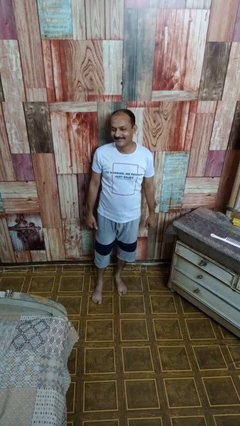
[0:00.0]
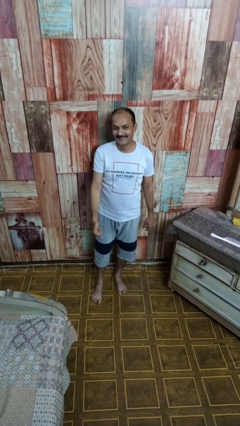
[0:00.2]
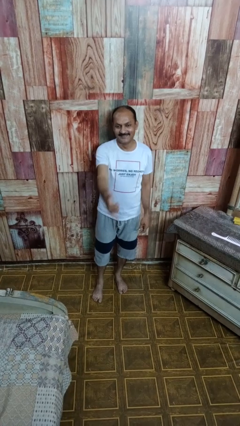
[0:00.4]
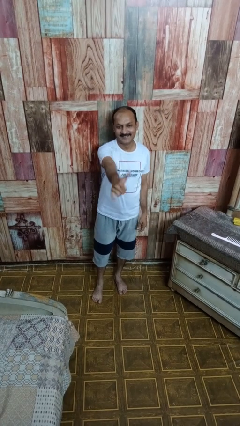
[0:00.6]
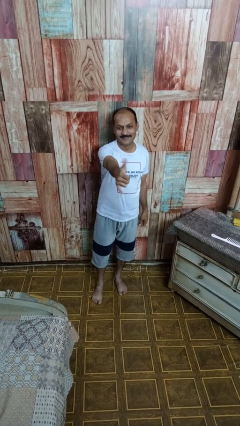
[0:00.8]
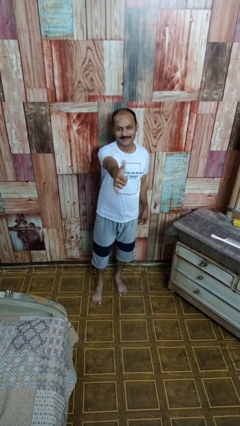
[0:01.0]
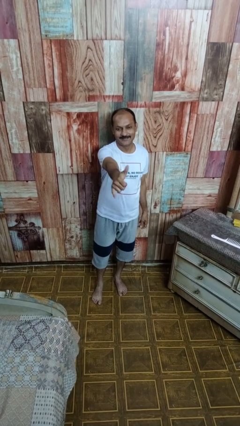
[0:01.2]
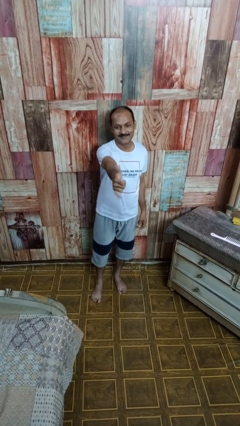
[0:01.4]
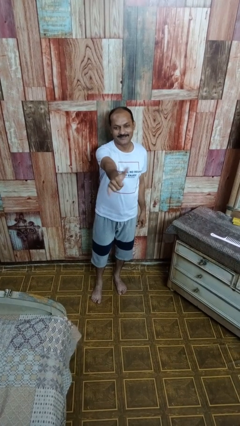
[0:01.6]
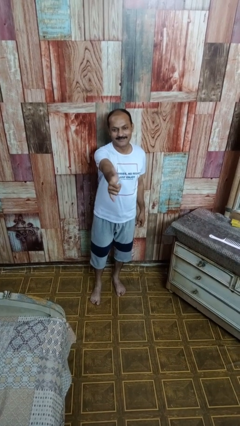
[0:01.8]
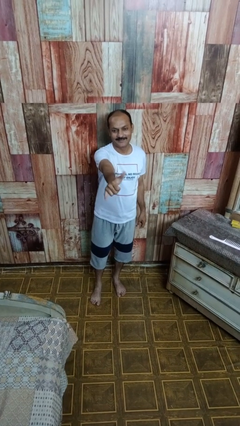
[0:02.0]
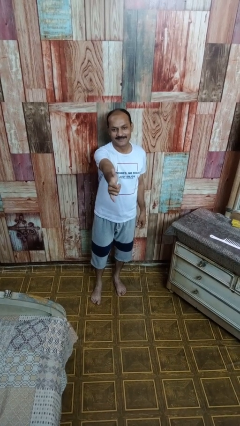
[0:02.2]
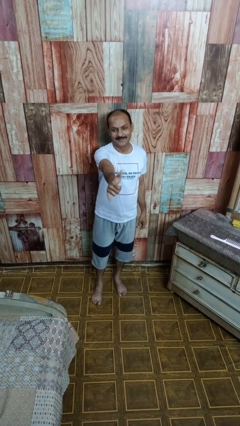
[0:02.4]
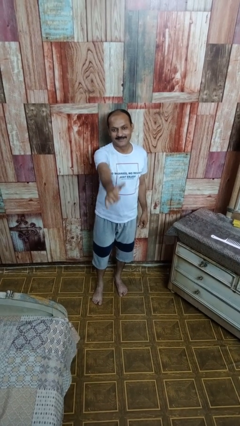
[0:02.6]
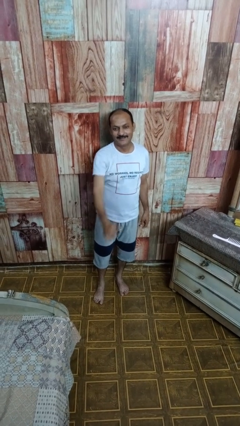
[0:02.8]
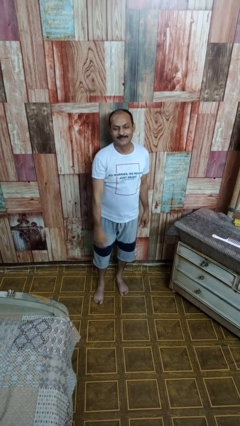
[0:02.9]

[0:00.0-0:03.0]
person gestures hang loose

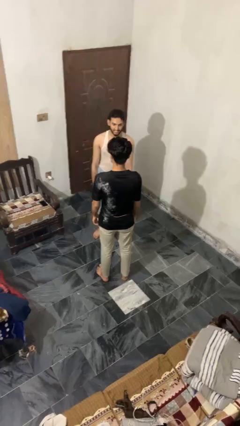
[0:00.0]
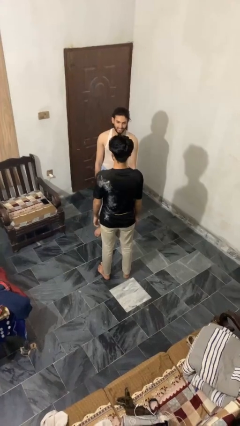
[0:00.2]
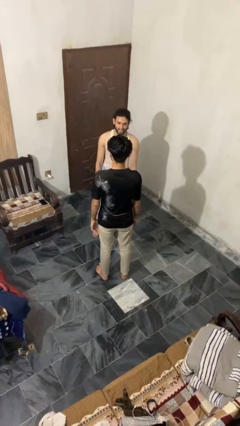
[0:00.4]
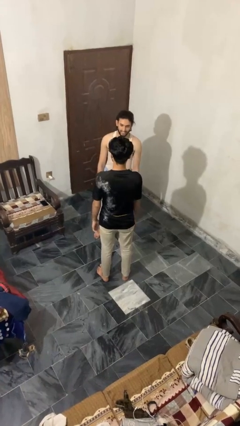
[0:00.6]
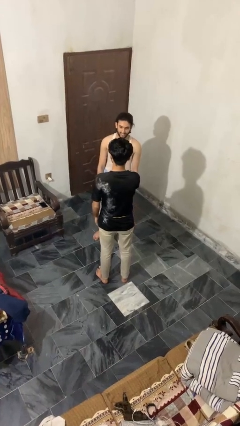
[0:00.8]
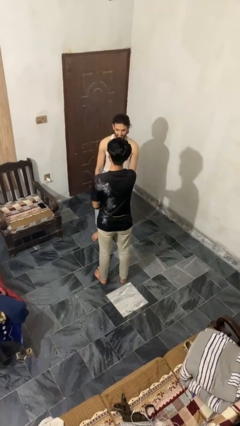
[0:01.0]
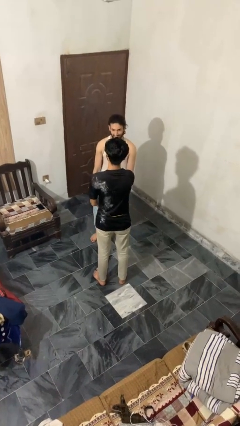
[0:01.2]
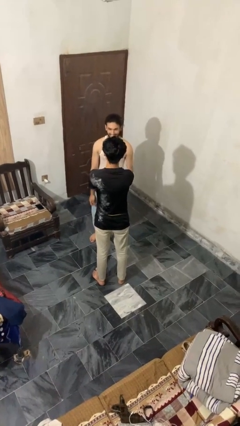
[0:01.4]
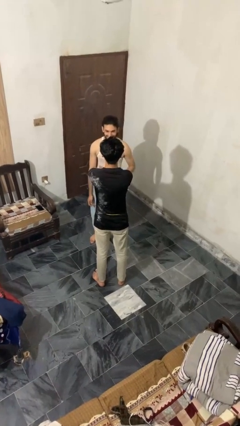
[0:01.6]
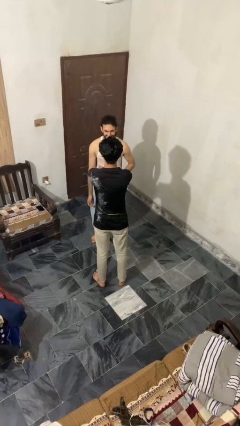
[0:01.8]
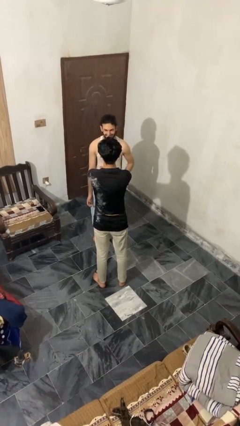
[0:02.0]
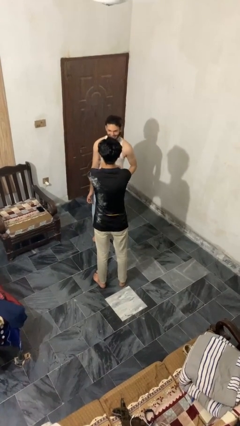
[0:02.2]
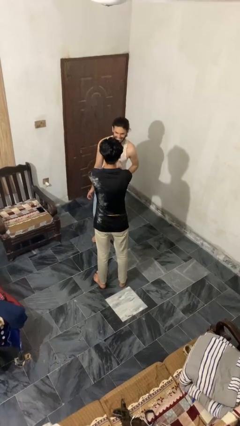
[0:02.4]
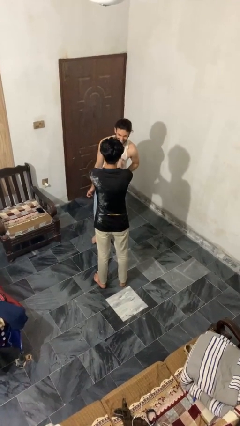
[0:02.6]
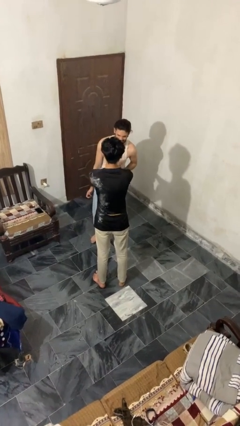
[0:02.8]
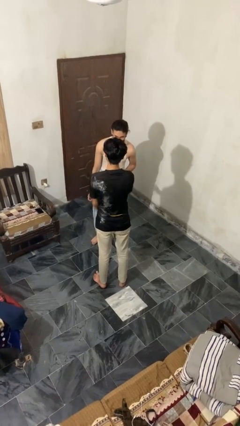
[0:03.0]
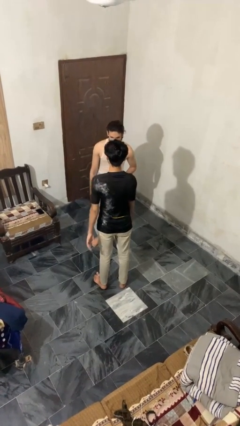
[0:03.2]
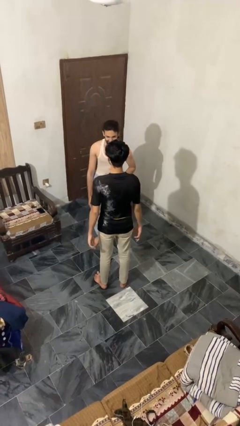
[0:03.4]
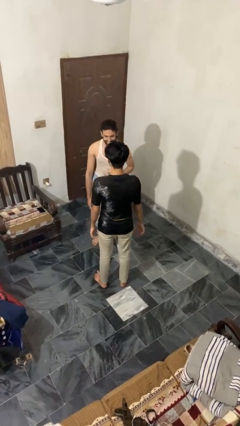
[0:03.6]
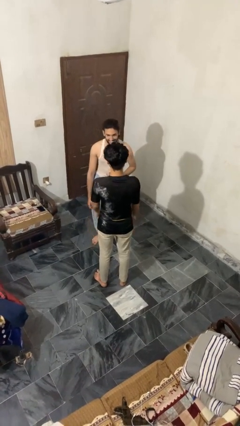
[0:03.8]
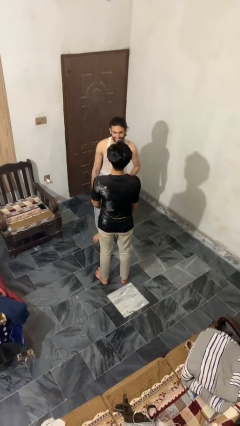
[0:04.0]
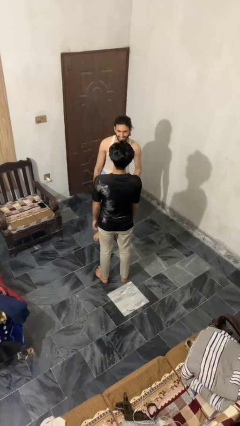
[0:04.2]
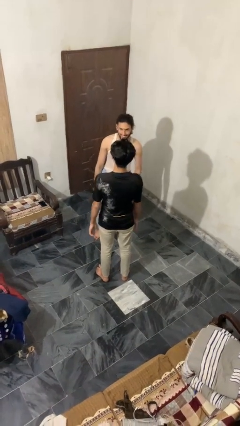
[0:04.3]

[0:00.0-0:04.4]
person tickles person

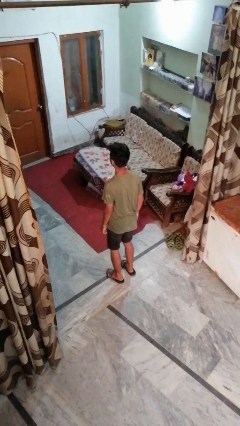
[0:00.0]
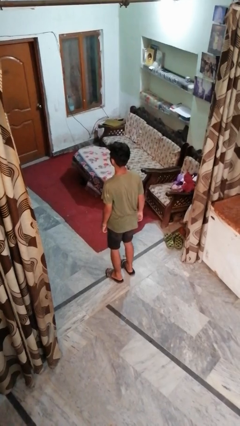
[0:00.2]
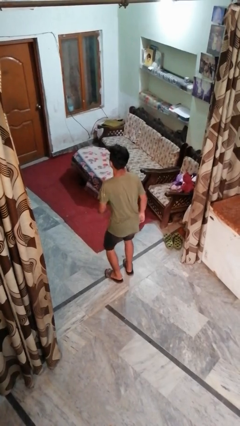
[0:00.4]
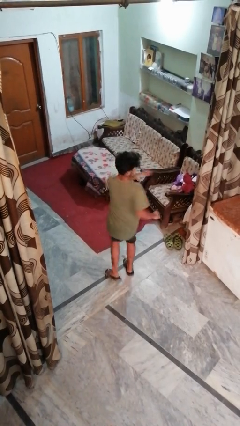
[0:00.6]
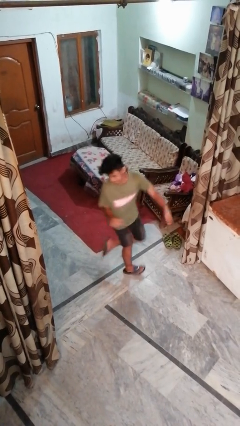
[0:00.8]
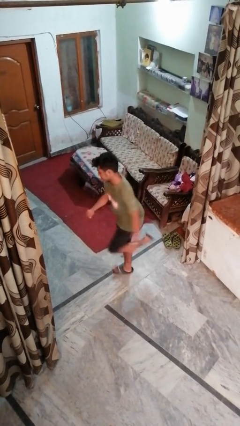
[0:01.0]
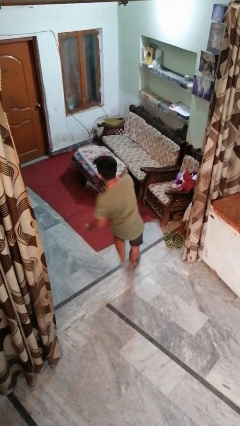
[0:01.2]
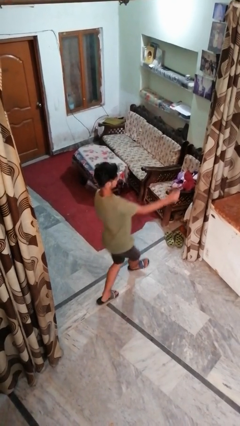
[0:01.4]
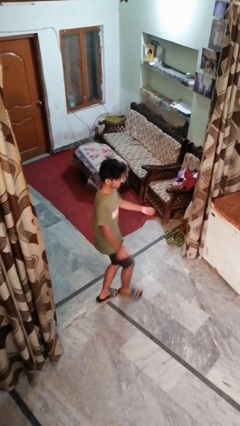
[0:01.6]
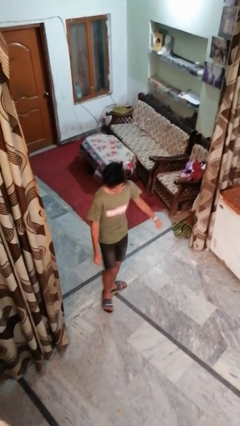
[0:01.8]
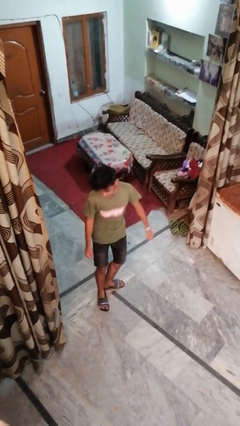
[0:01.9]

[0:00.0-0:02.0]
person twirls

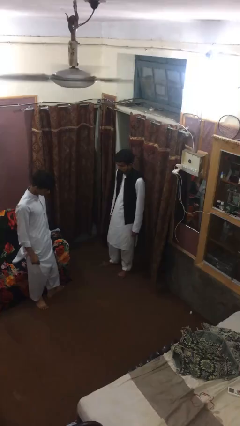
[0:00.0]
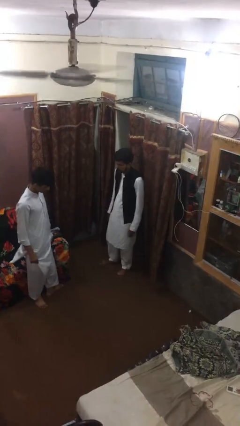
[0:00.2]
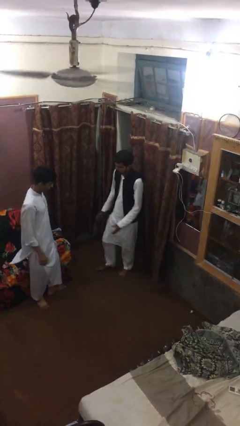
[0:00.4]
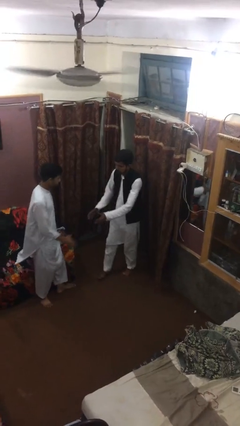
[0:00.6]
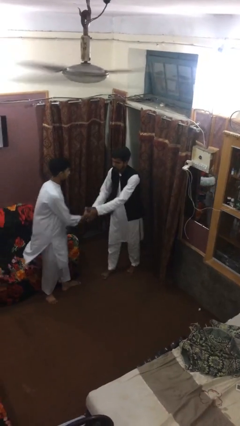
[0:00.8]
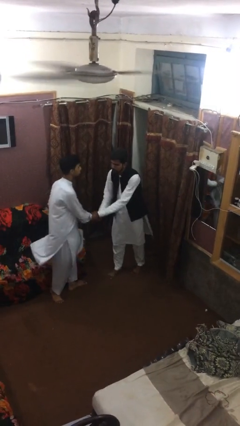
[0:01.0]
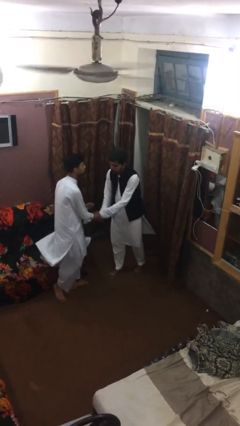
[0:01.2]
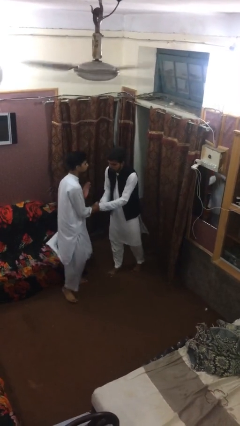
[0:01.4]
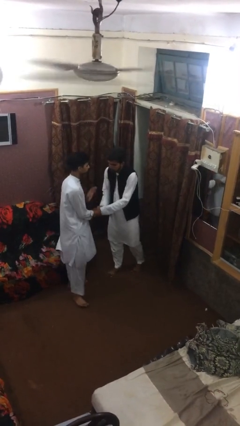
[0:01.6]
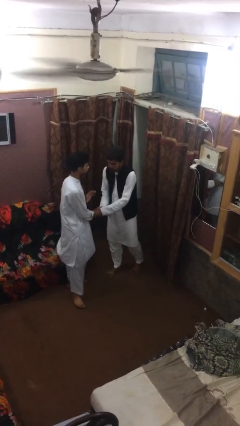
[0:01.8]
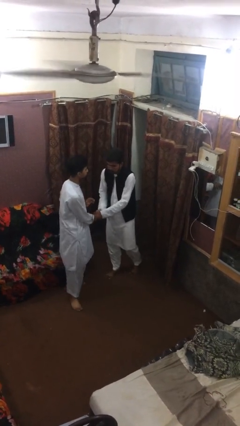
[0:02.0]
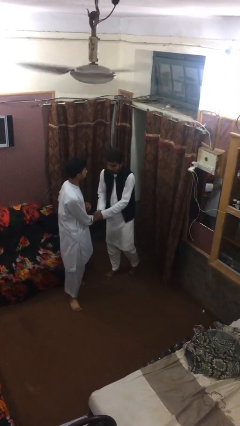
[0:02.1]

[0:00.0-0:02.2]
person shakes hand

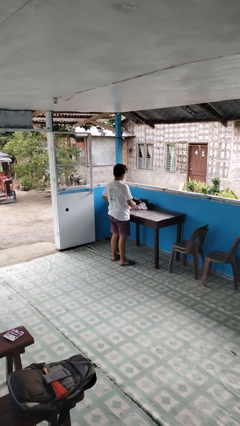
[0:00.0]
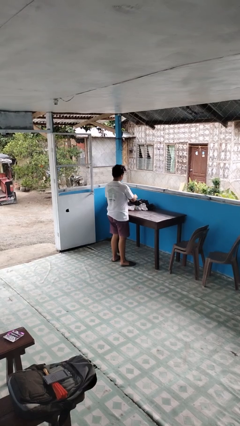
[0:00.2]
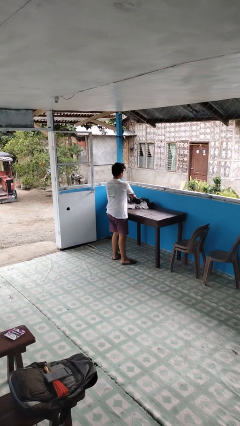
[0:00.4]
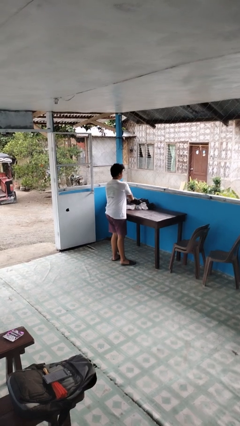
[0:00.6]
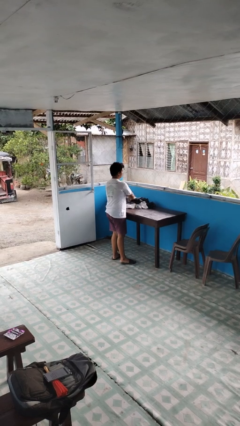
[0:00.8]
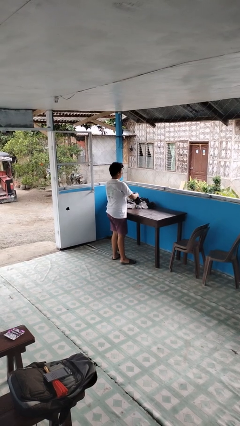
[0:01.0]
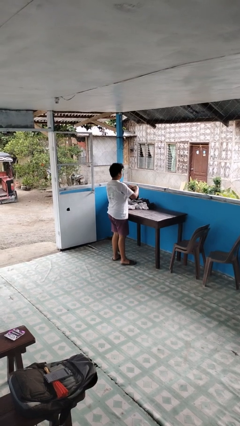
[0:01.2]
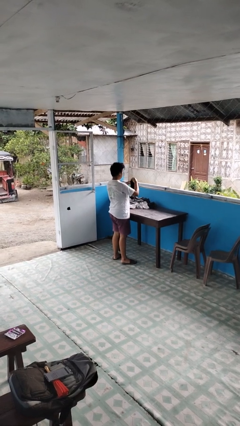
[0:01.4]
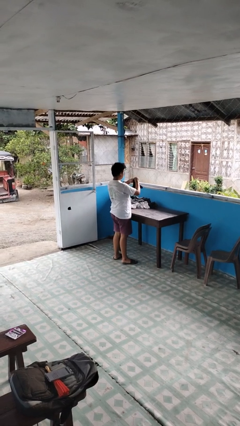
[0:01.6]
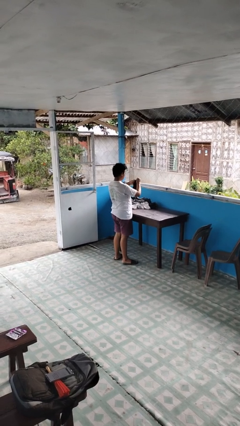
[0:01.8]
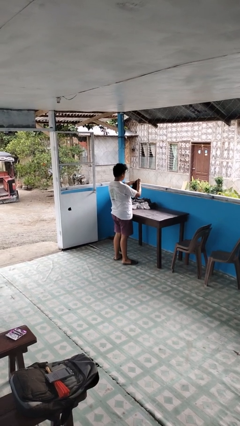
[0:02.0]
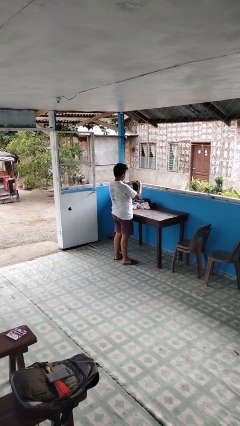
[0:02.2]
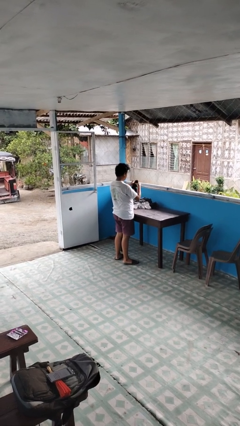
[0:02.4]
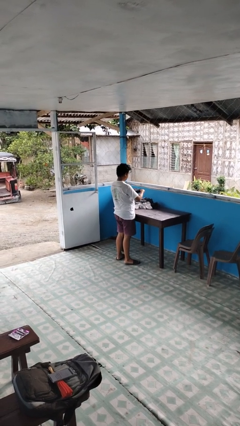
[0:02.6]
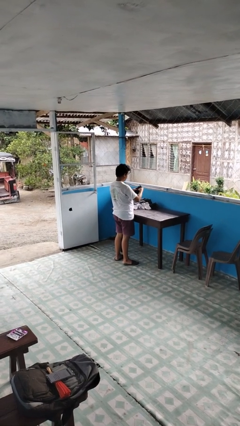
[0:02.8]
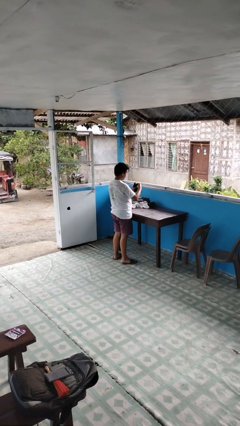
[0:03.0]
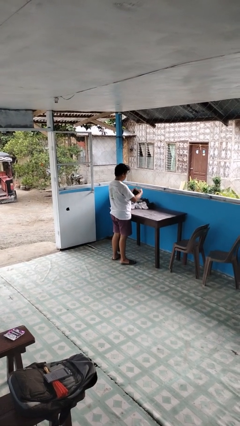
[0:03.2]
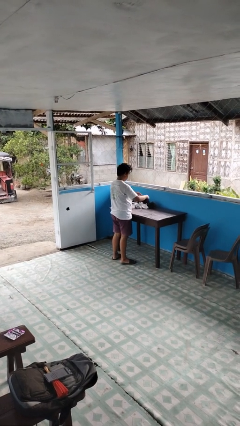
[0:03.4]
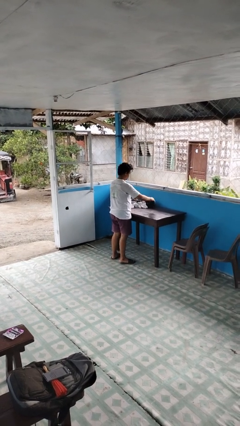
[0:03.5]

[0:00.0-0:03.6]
person folds socks

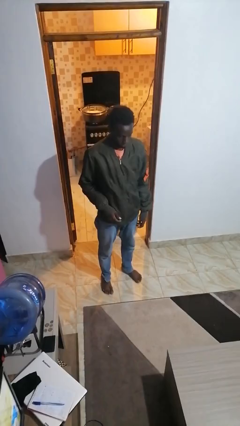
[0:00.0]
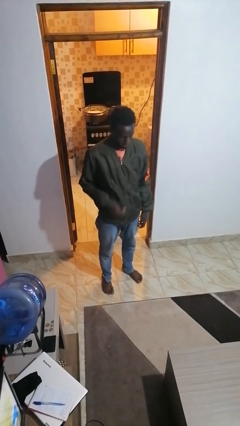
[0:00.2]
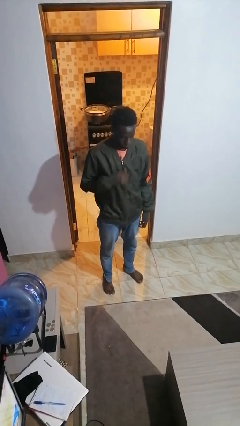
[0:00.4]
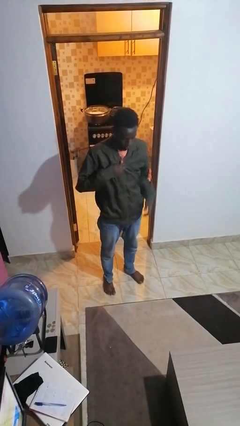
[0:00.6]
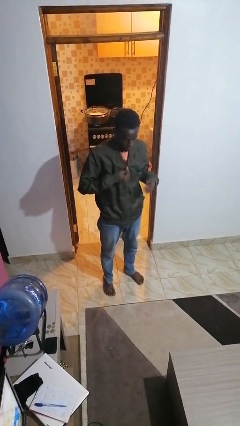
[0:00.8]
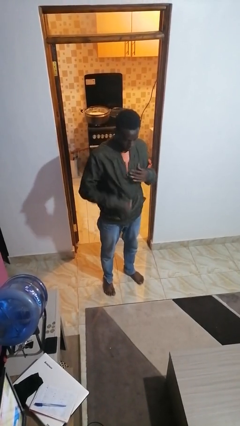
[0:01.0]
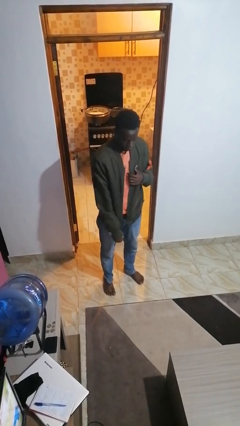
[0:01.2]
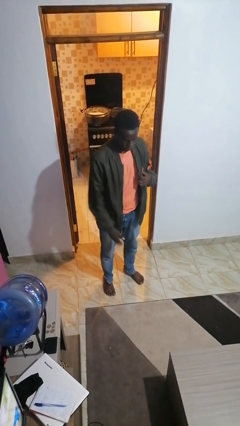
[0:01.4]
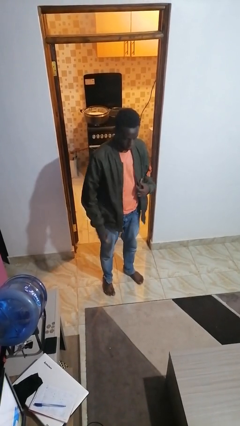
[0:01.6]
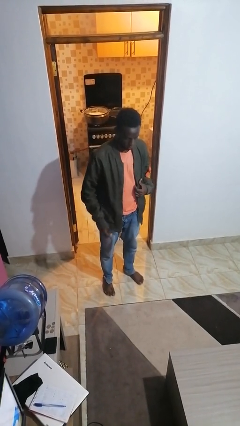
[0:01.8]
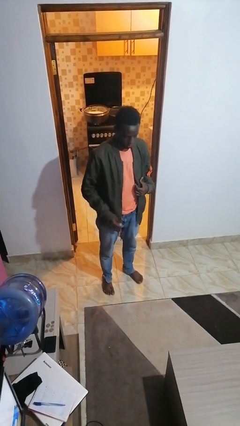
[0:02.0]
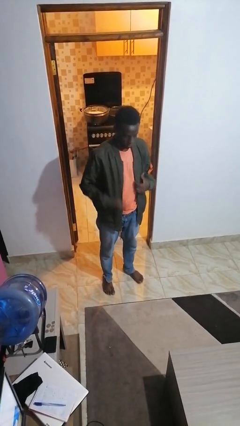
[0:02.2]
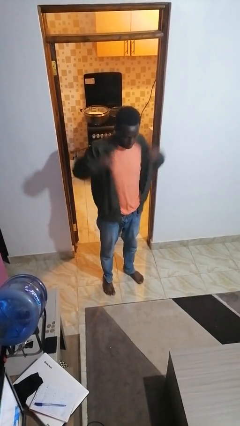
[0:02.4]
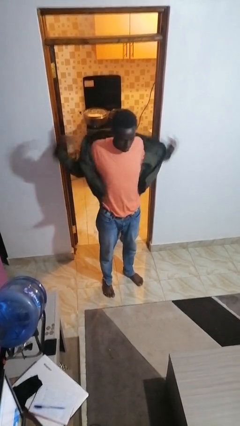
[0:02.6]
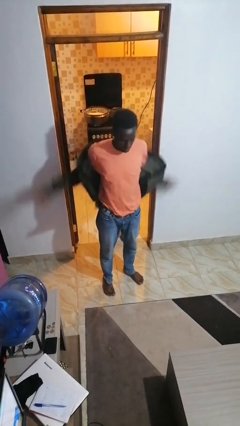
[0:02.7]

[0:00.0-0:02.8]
person unzips jacket
